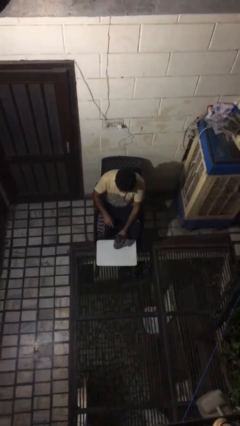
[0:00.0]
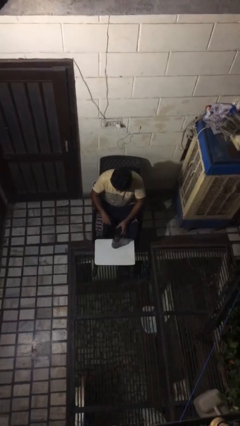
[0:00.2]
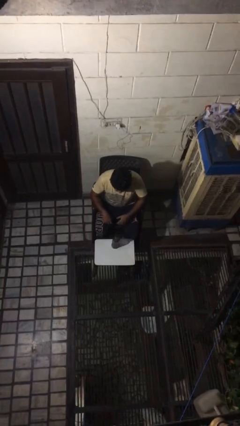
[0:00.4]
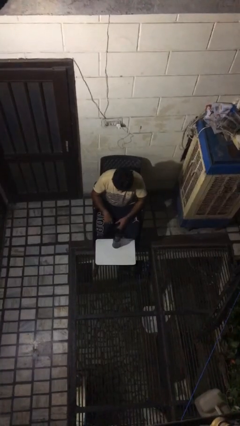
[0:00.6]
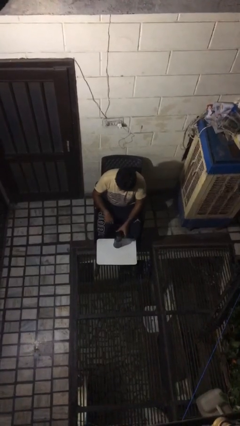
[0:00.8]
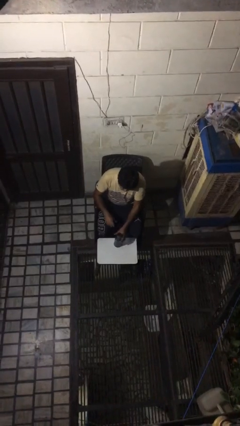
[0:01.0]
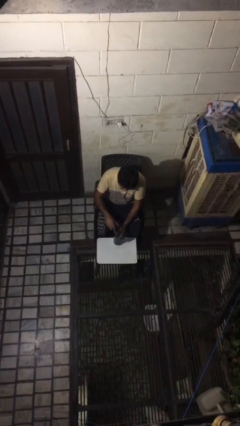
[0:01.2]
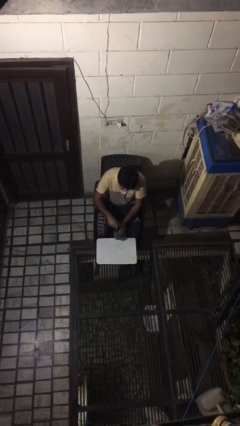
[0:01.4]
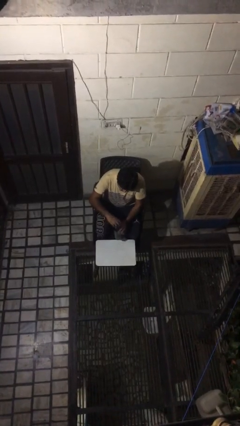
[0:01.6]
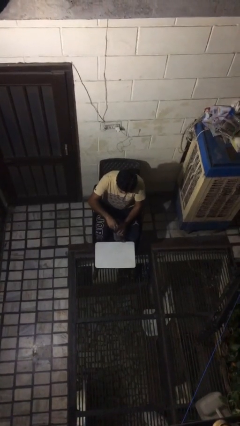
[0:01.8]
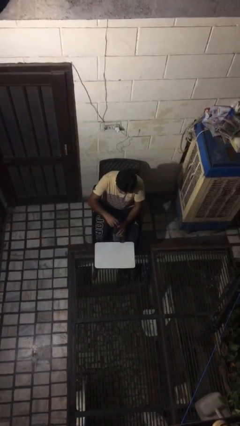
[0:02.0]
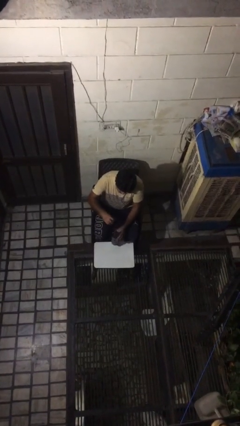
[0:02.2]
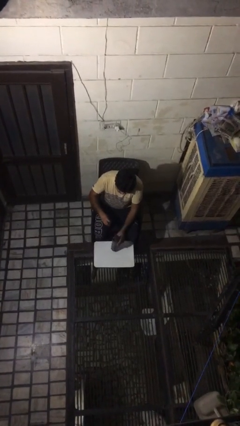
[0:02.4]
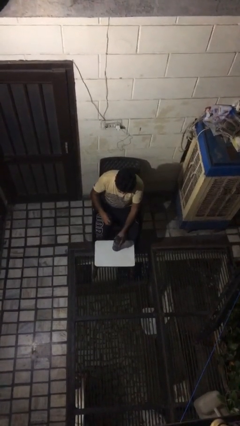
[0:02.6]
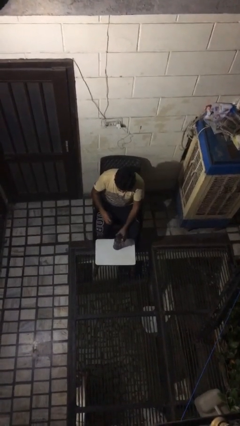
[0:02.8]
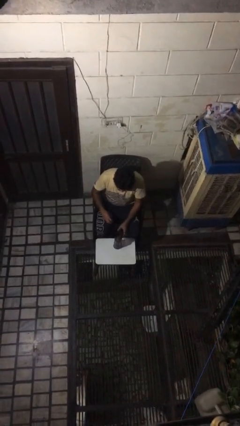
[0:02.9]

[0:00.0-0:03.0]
person unscrews lid from bottle

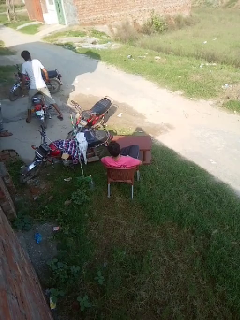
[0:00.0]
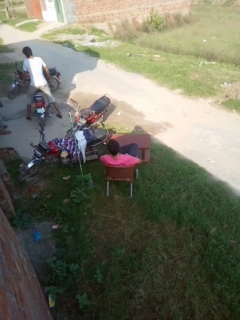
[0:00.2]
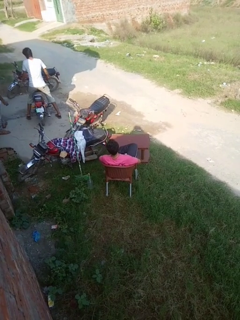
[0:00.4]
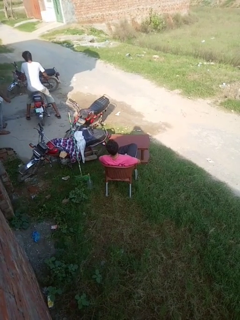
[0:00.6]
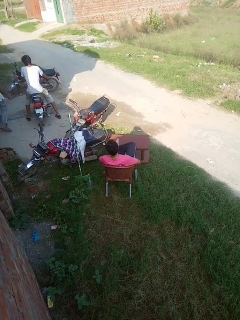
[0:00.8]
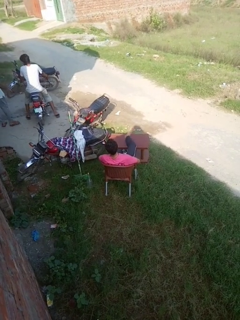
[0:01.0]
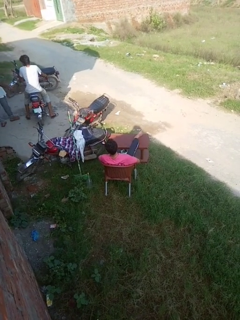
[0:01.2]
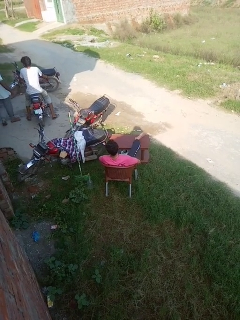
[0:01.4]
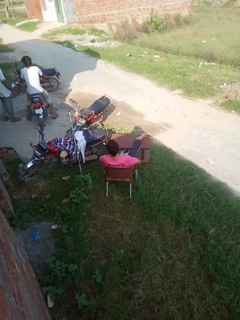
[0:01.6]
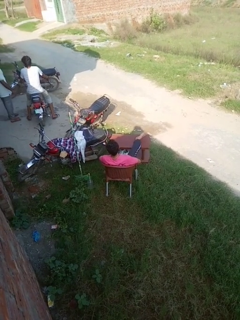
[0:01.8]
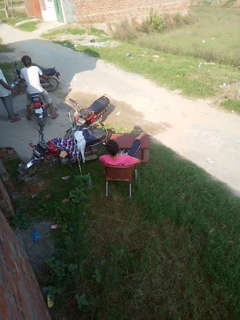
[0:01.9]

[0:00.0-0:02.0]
person puts feet up

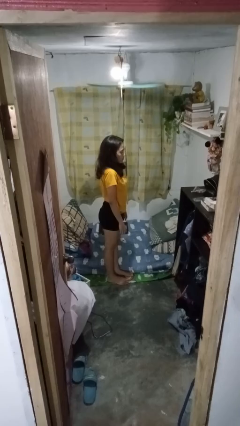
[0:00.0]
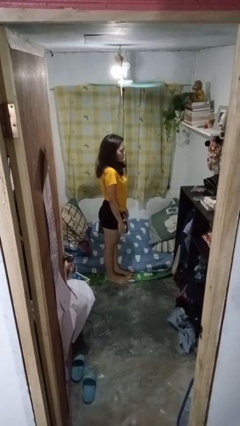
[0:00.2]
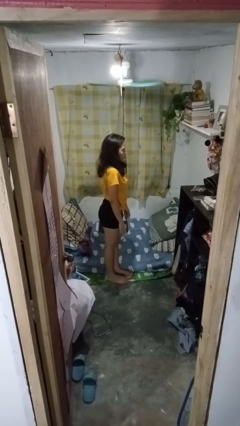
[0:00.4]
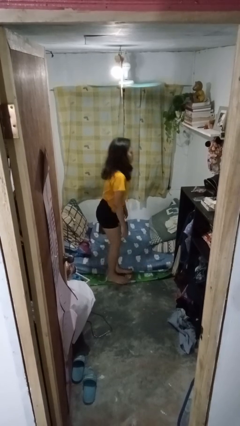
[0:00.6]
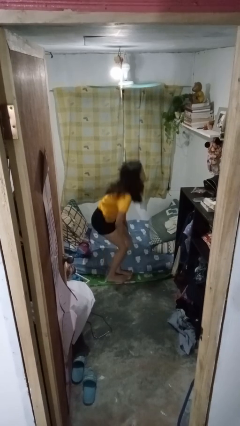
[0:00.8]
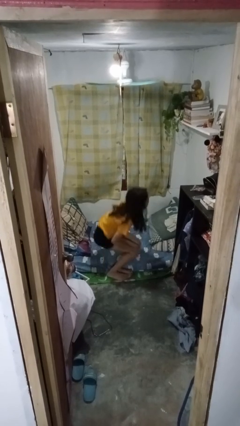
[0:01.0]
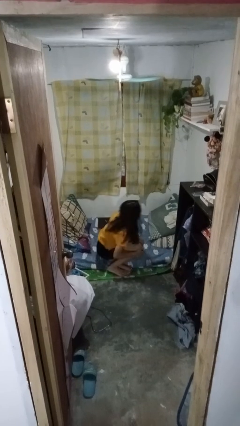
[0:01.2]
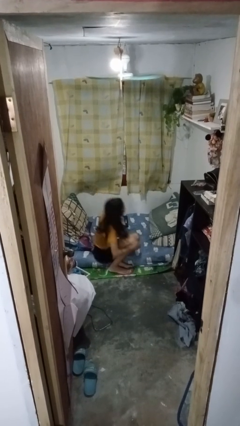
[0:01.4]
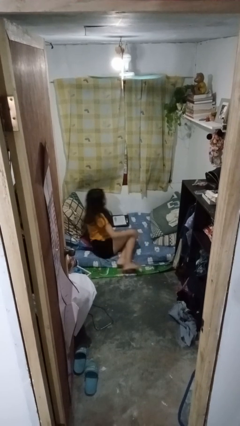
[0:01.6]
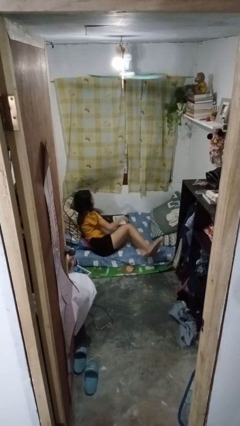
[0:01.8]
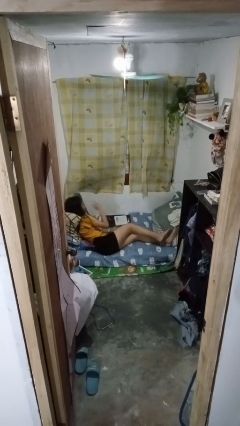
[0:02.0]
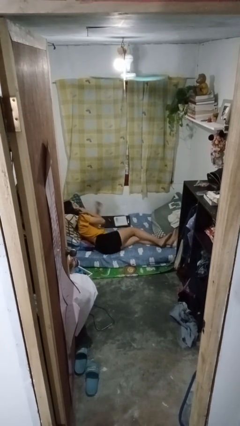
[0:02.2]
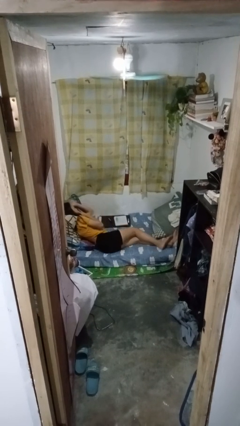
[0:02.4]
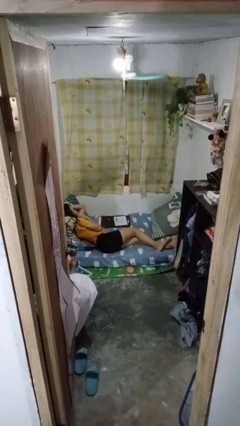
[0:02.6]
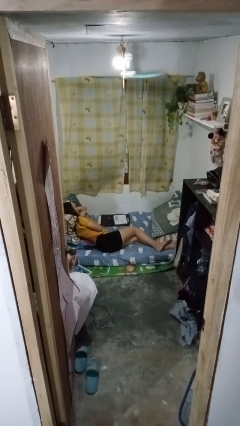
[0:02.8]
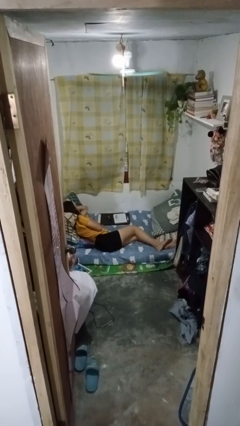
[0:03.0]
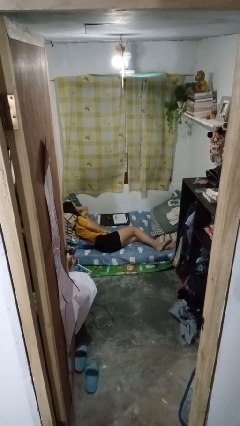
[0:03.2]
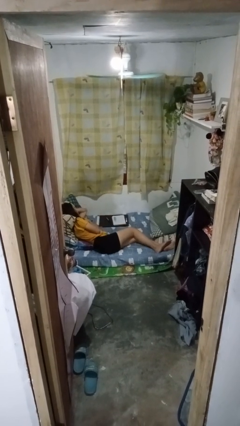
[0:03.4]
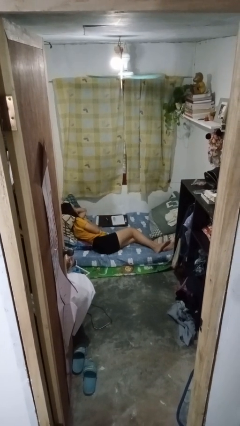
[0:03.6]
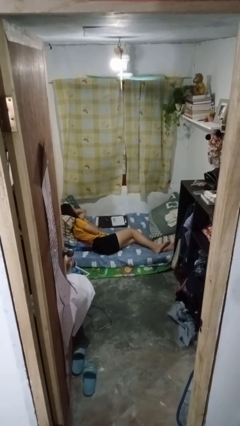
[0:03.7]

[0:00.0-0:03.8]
person lies down on bed

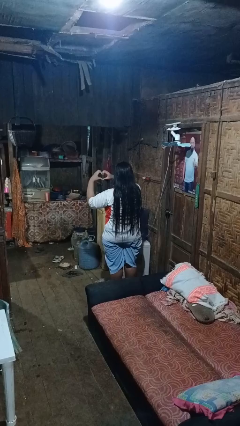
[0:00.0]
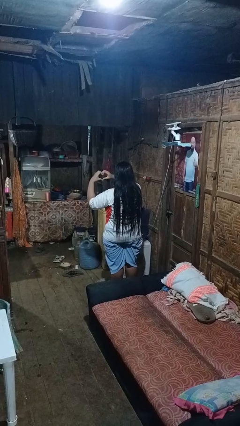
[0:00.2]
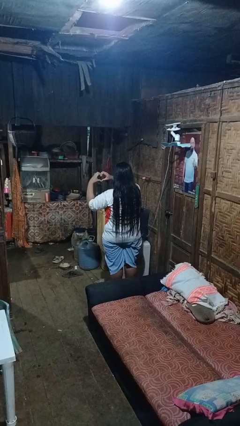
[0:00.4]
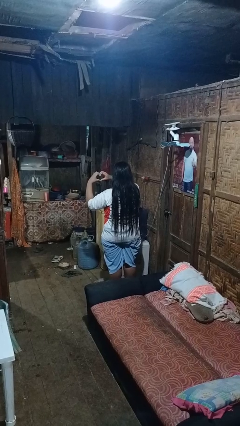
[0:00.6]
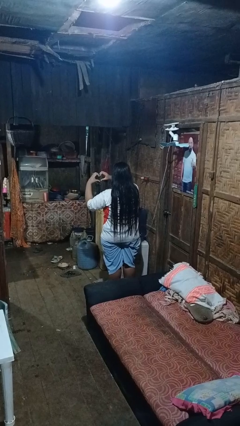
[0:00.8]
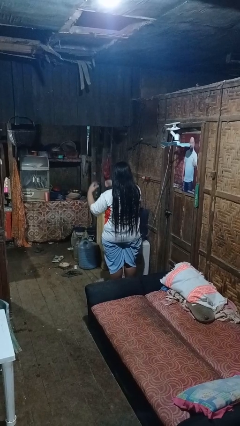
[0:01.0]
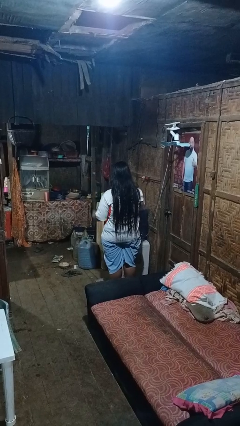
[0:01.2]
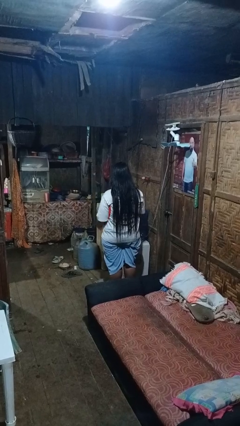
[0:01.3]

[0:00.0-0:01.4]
person gestures heart

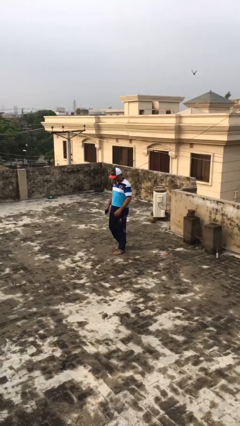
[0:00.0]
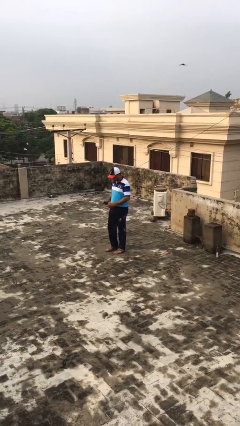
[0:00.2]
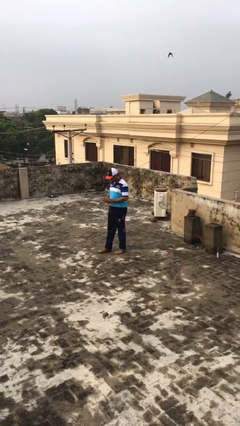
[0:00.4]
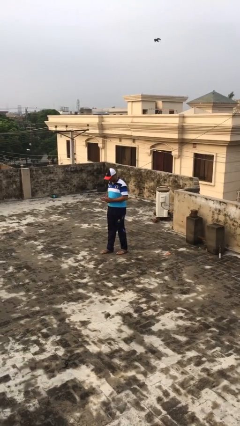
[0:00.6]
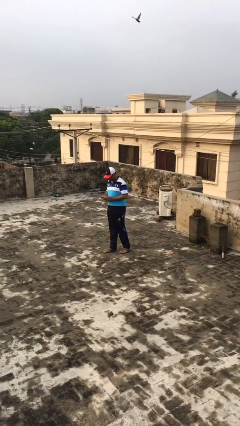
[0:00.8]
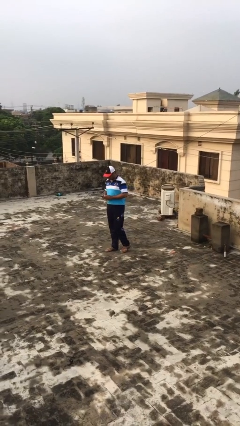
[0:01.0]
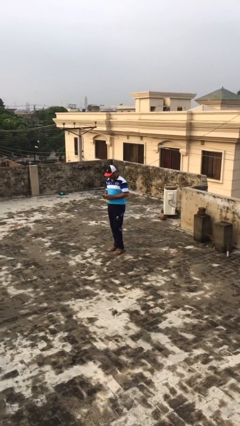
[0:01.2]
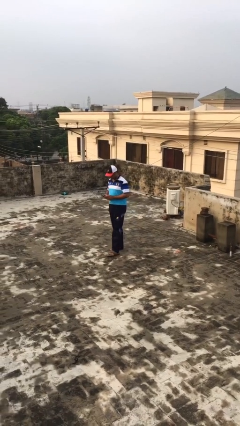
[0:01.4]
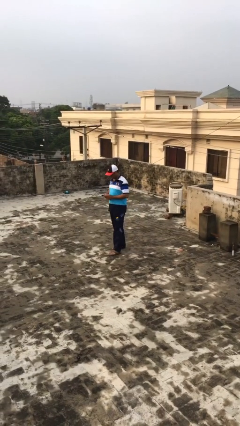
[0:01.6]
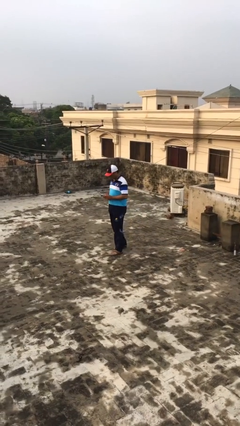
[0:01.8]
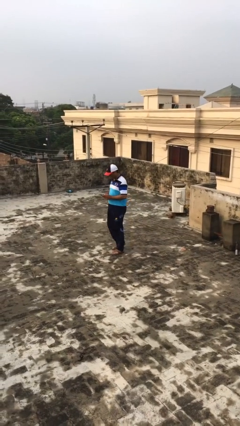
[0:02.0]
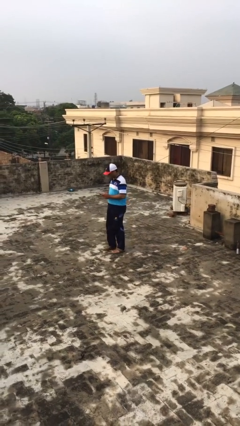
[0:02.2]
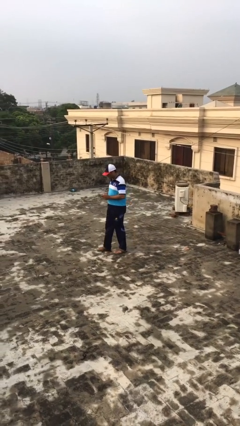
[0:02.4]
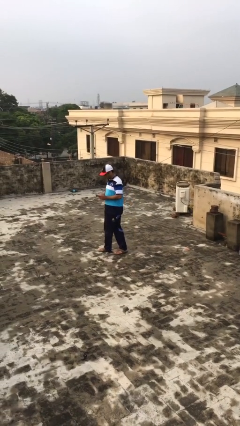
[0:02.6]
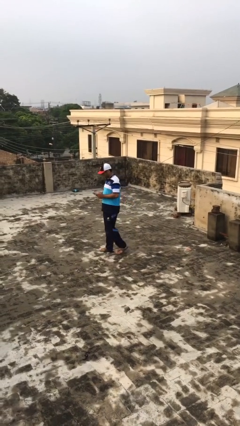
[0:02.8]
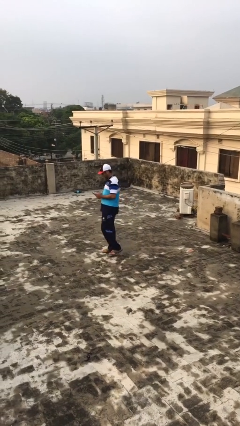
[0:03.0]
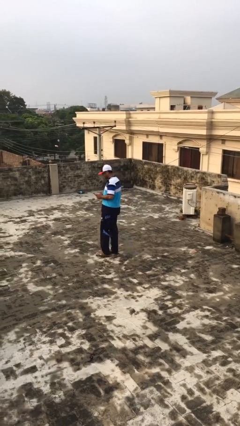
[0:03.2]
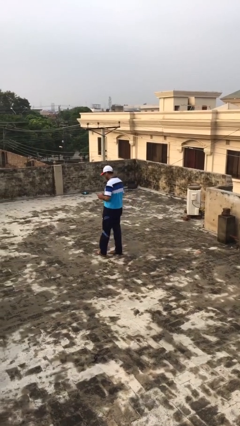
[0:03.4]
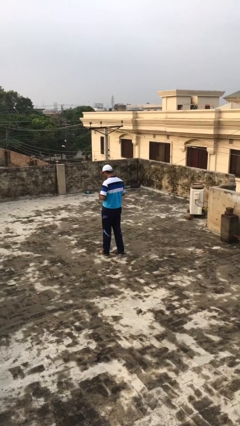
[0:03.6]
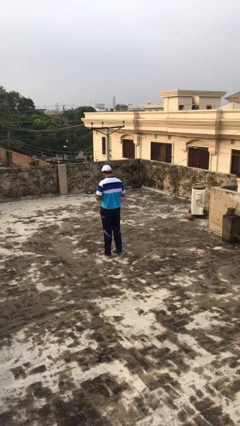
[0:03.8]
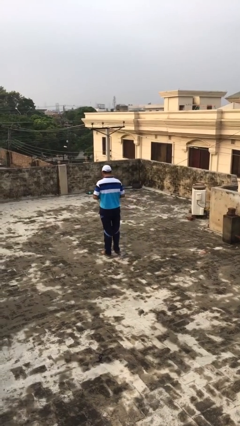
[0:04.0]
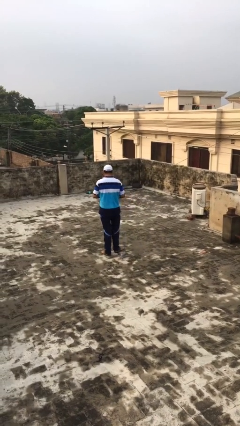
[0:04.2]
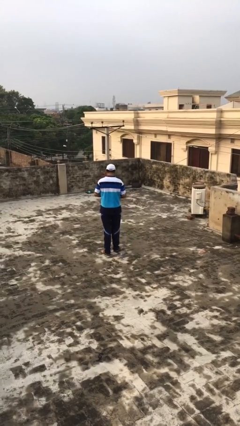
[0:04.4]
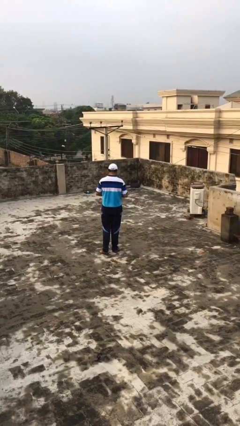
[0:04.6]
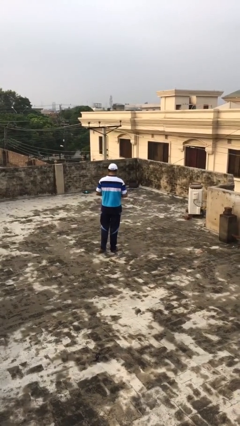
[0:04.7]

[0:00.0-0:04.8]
person texts on phone

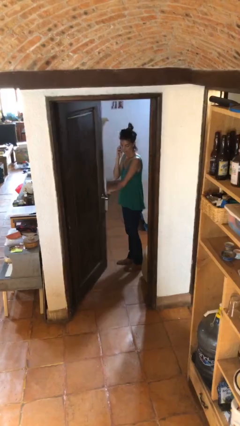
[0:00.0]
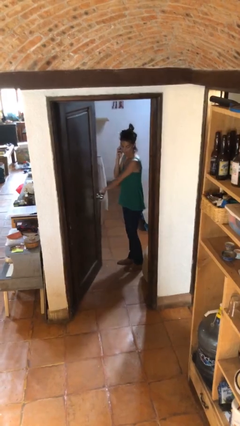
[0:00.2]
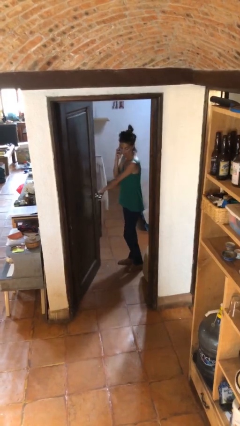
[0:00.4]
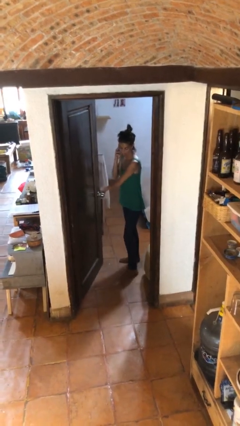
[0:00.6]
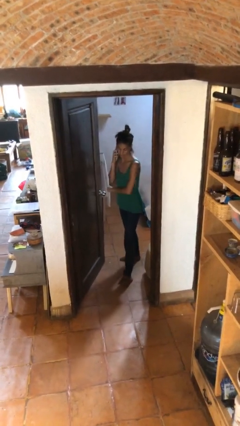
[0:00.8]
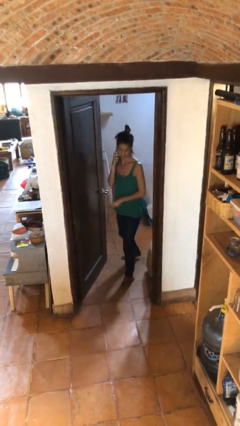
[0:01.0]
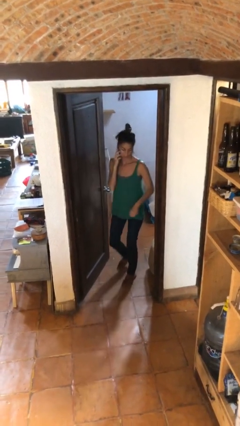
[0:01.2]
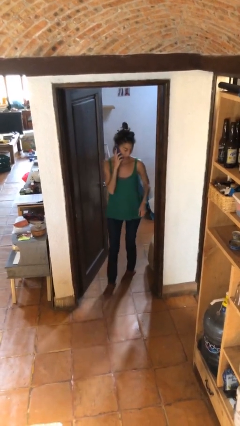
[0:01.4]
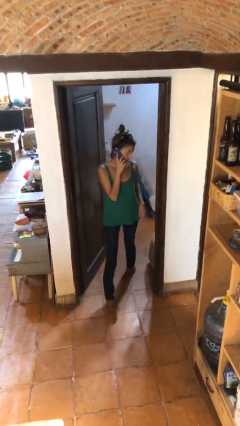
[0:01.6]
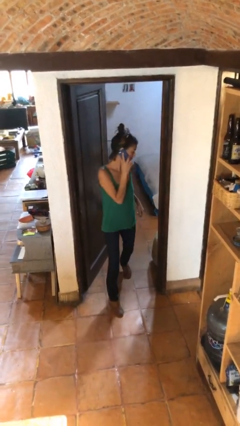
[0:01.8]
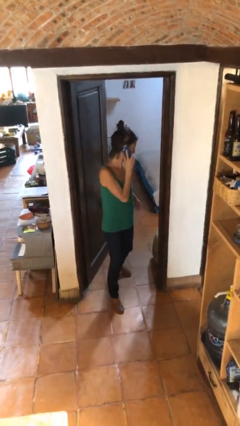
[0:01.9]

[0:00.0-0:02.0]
person enters scene through structure

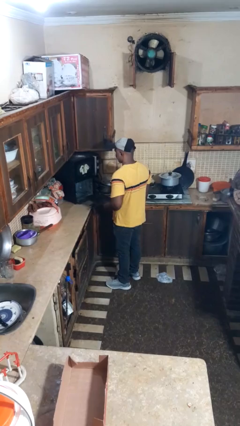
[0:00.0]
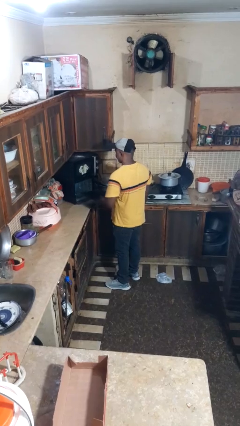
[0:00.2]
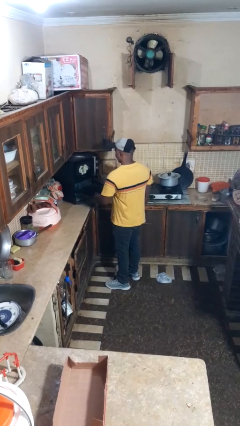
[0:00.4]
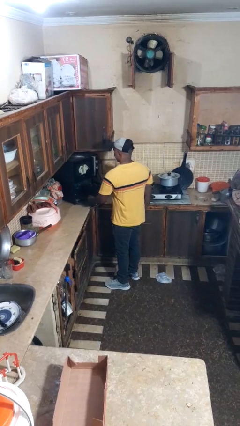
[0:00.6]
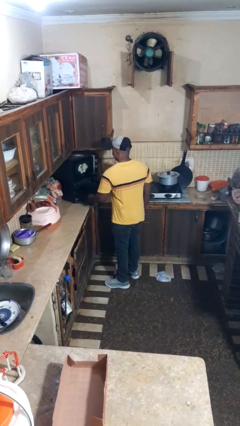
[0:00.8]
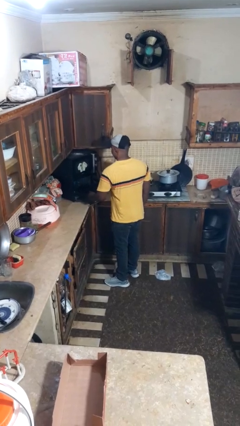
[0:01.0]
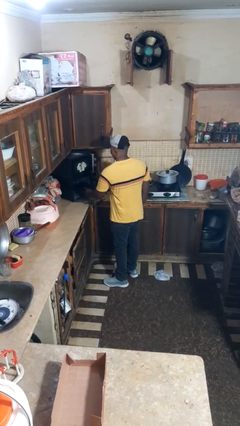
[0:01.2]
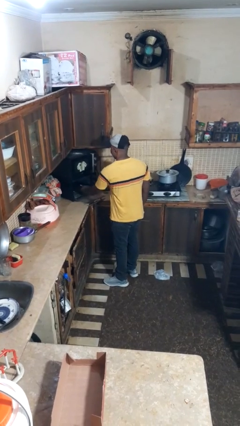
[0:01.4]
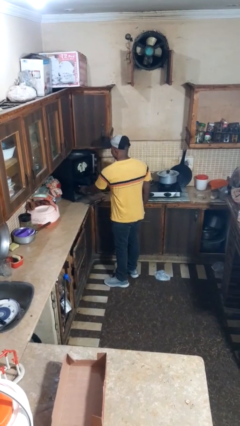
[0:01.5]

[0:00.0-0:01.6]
person puts object into oven
